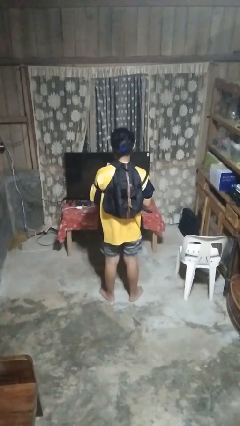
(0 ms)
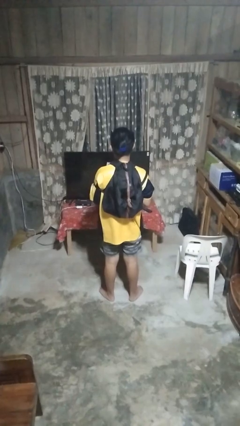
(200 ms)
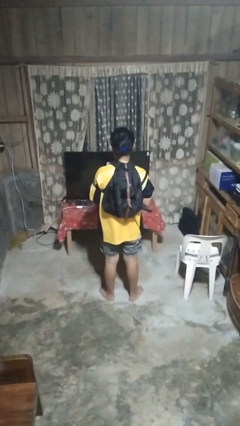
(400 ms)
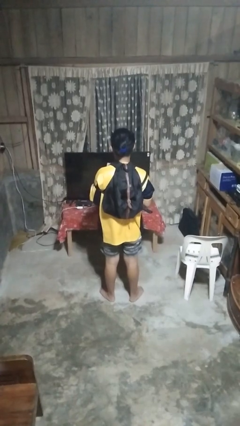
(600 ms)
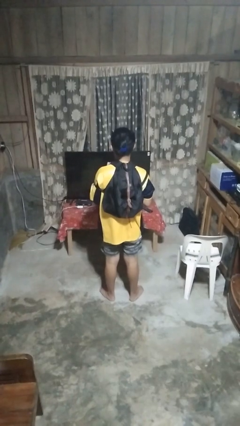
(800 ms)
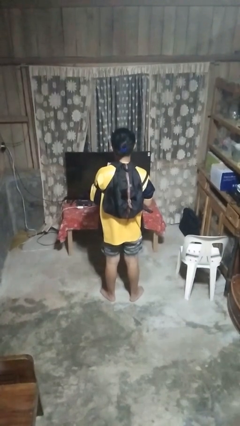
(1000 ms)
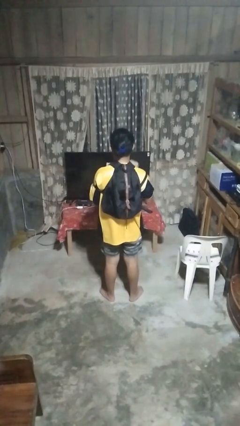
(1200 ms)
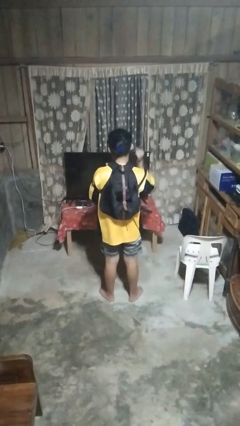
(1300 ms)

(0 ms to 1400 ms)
person takes off backpack

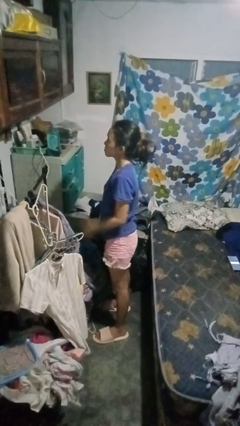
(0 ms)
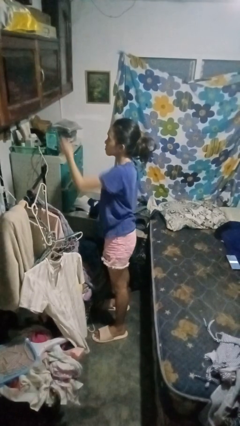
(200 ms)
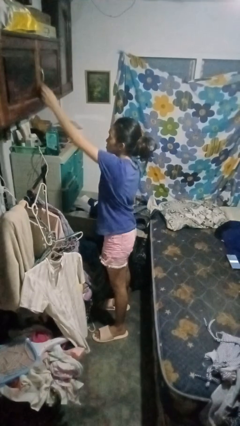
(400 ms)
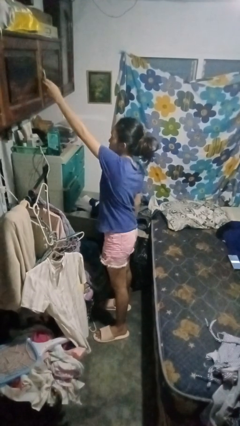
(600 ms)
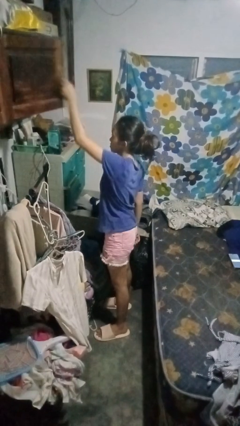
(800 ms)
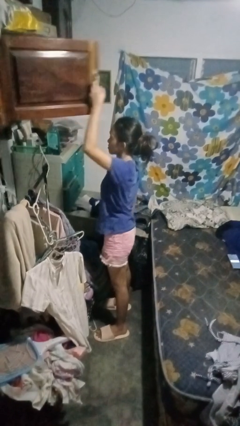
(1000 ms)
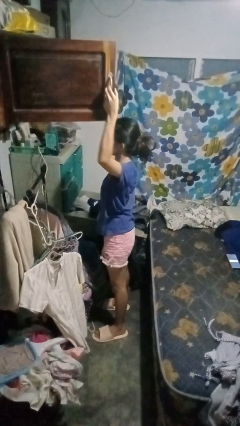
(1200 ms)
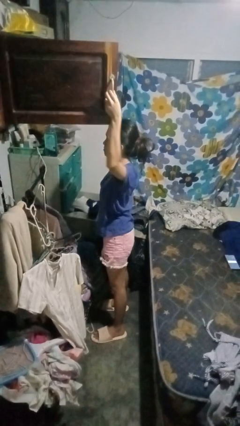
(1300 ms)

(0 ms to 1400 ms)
person opens closet door

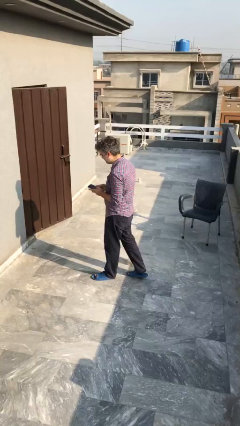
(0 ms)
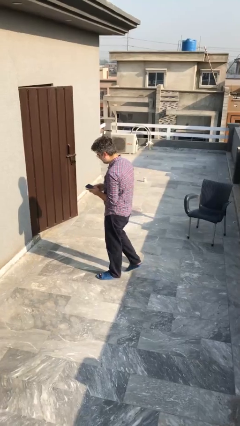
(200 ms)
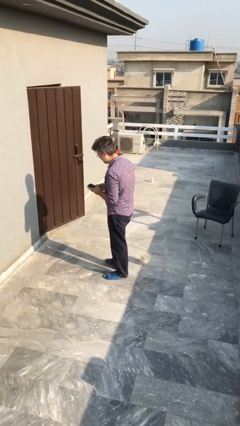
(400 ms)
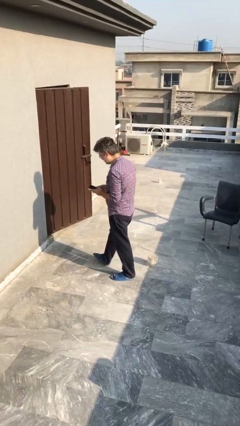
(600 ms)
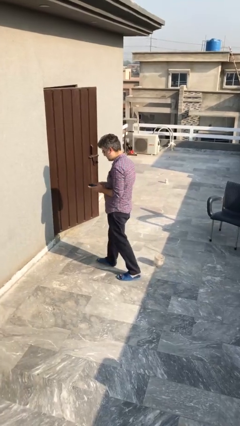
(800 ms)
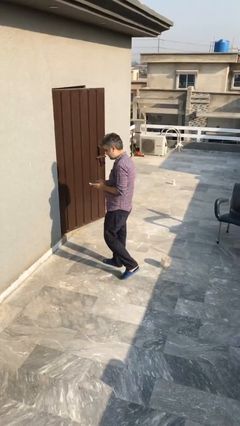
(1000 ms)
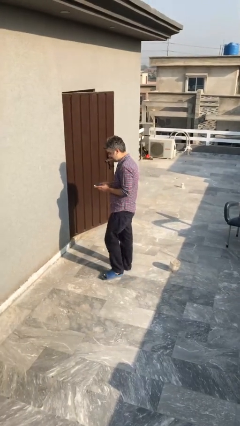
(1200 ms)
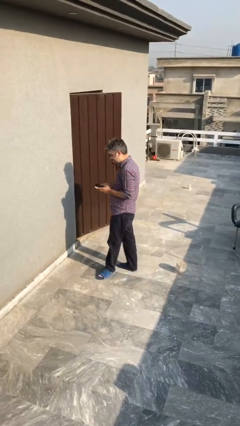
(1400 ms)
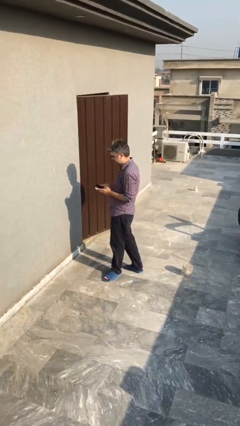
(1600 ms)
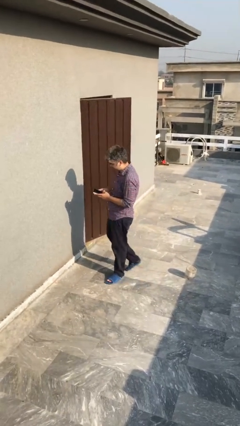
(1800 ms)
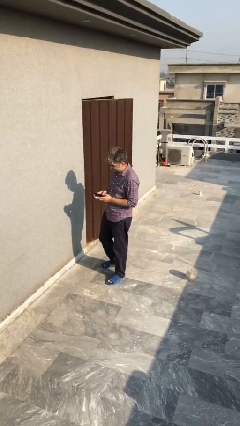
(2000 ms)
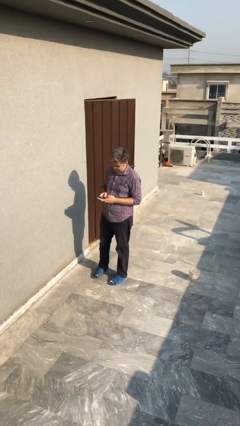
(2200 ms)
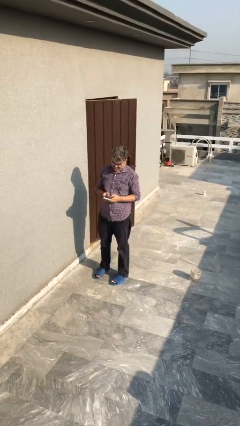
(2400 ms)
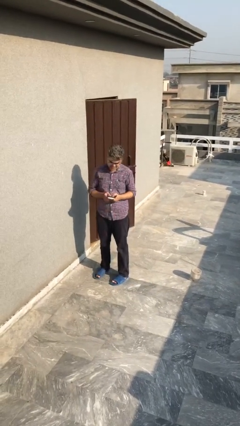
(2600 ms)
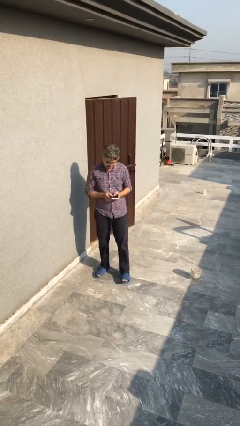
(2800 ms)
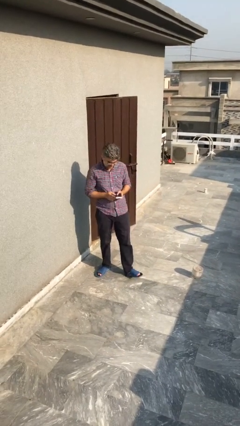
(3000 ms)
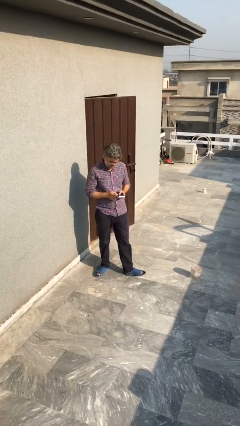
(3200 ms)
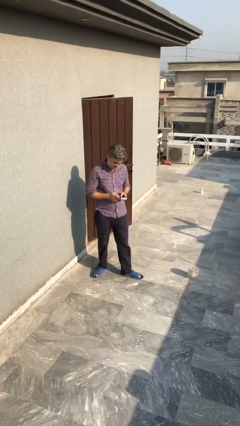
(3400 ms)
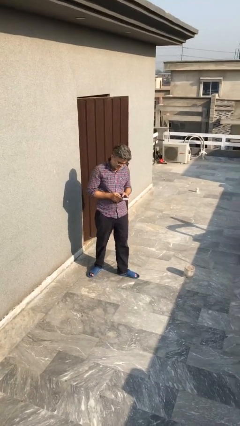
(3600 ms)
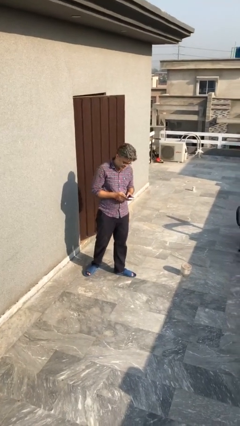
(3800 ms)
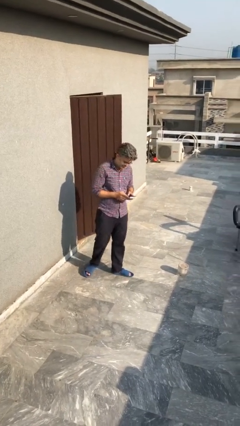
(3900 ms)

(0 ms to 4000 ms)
person texts on phone

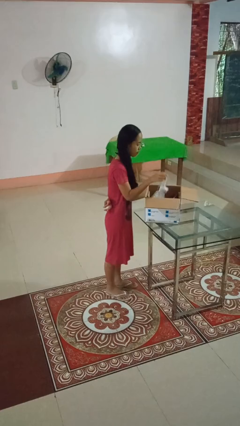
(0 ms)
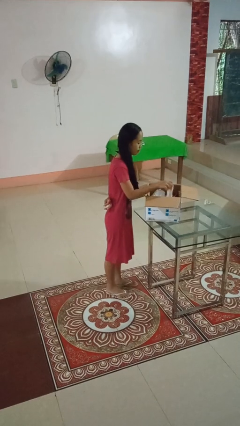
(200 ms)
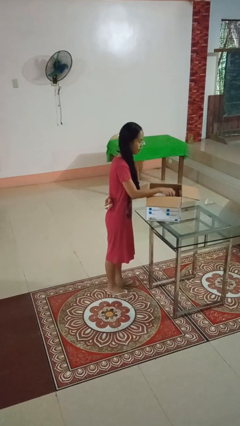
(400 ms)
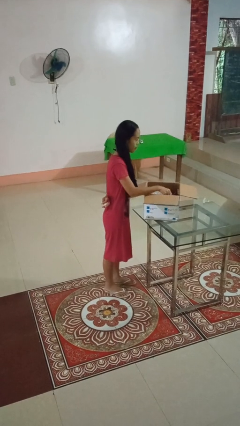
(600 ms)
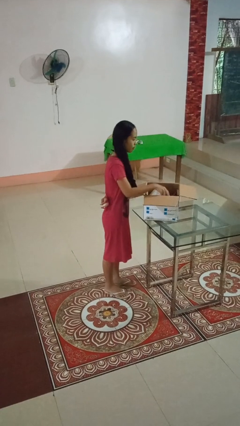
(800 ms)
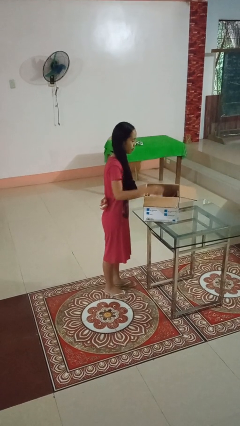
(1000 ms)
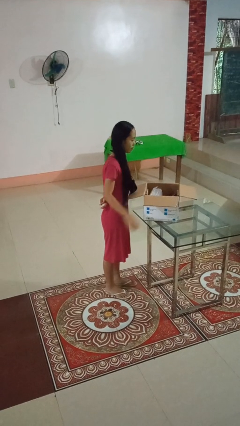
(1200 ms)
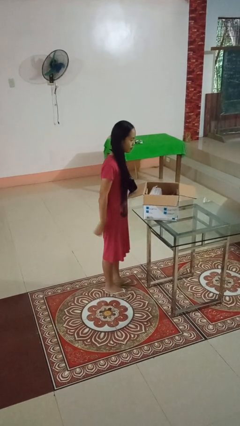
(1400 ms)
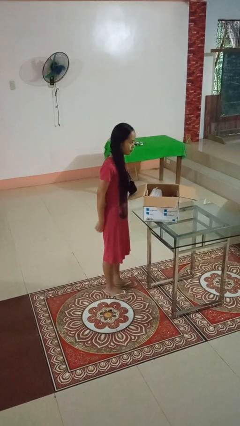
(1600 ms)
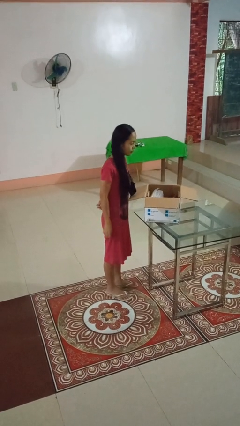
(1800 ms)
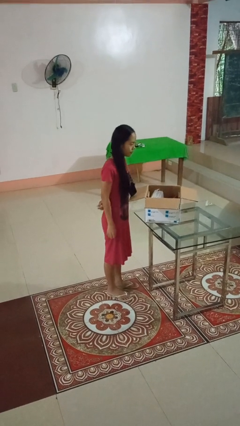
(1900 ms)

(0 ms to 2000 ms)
person puts object into box

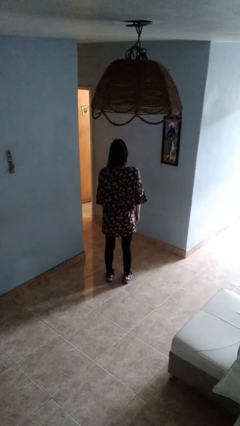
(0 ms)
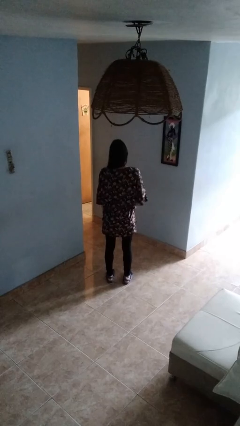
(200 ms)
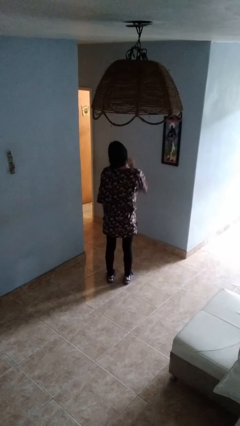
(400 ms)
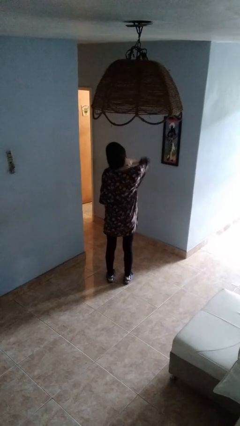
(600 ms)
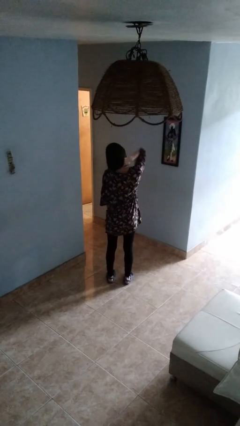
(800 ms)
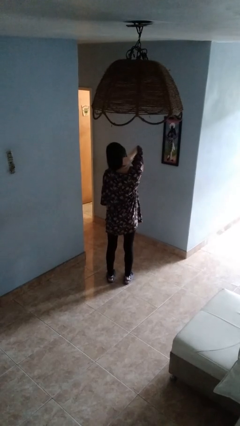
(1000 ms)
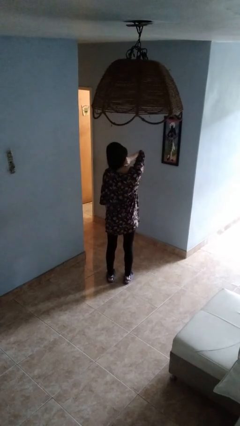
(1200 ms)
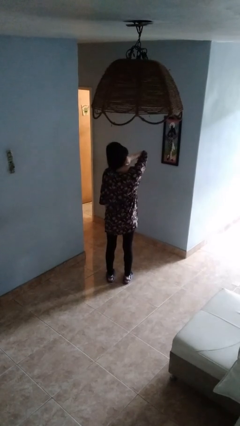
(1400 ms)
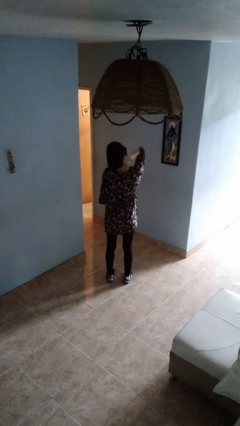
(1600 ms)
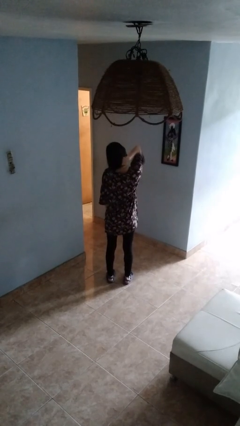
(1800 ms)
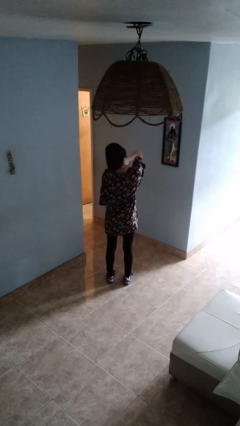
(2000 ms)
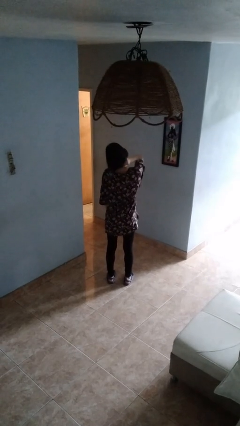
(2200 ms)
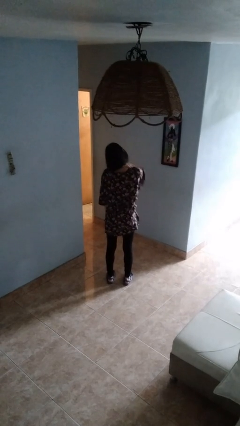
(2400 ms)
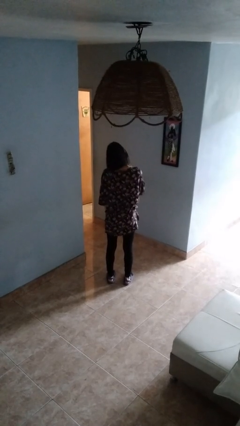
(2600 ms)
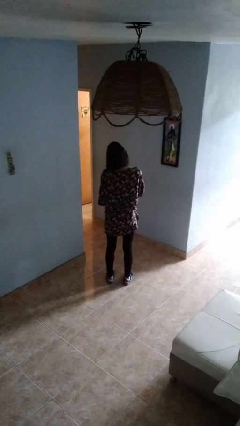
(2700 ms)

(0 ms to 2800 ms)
person rubs neck

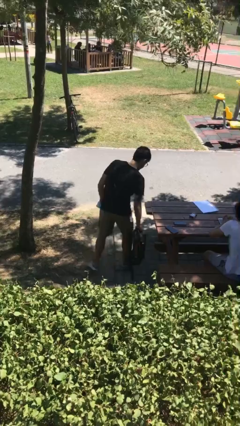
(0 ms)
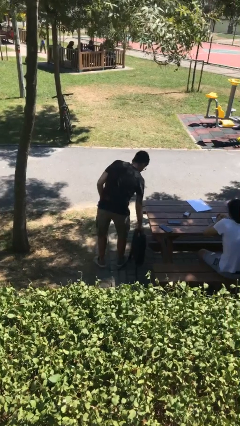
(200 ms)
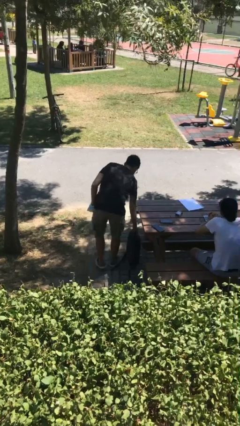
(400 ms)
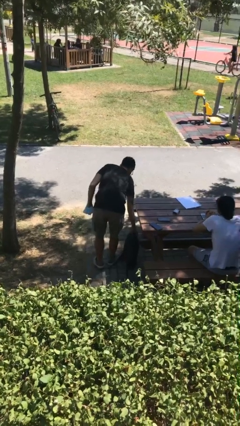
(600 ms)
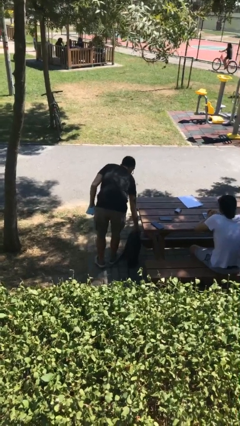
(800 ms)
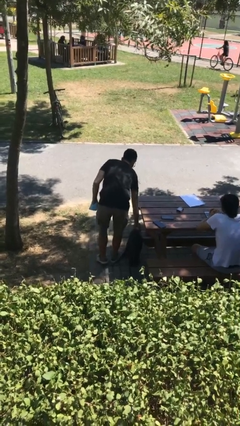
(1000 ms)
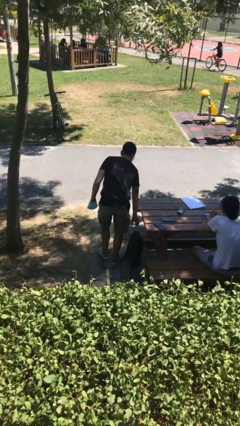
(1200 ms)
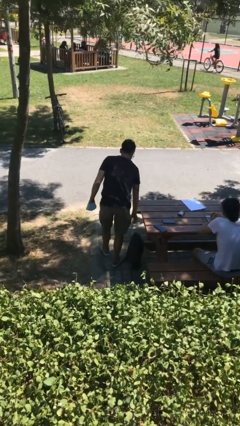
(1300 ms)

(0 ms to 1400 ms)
person puts down object on floor

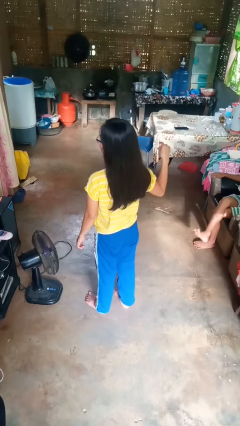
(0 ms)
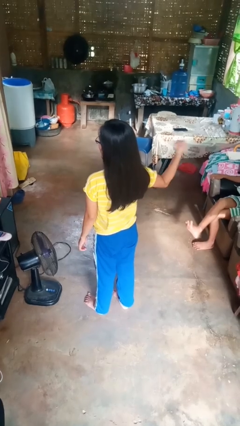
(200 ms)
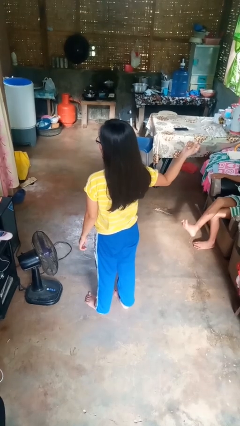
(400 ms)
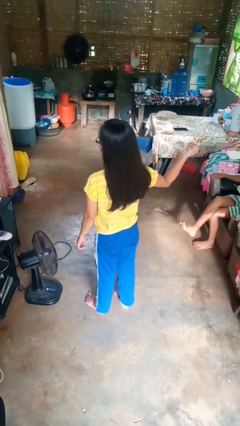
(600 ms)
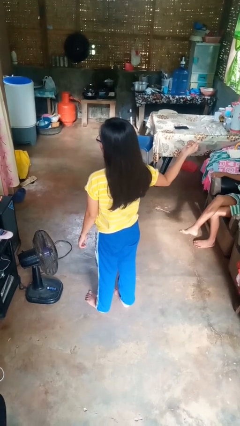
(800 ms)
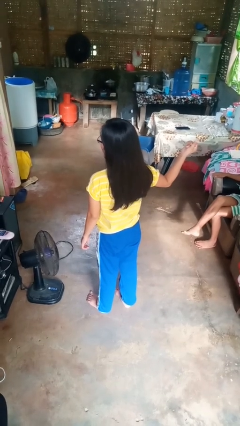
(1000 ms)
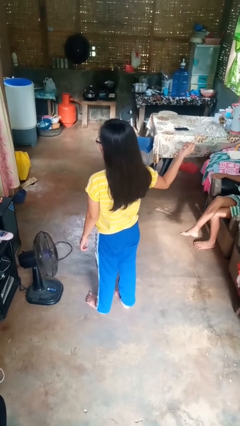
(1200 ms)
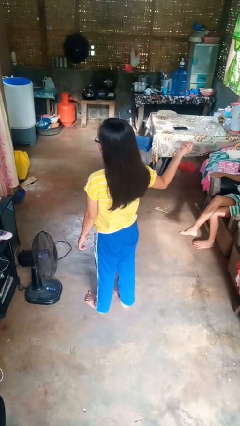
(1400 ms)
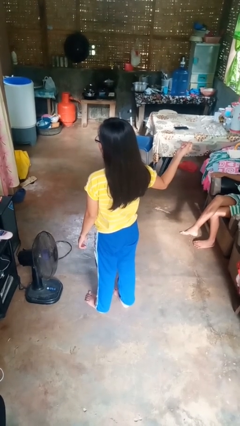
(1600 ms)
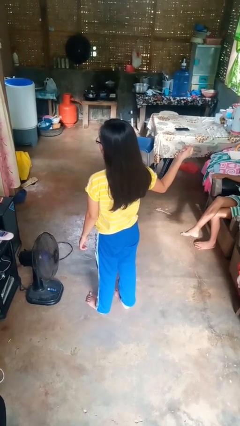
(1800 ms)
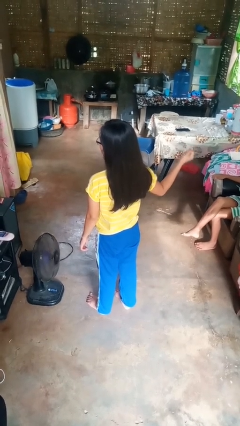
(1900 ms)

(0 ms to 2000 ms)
person snaps fingers

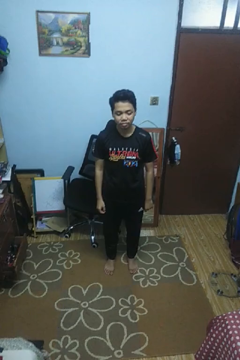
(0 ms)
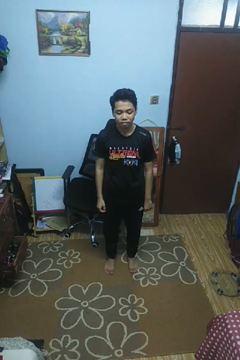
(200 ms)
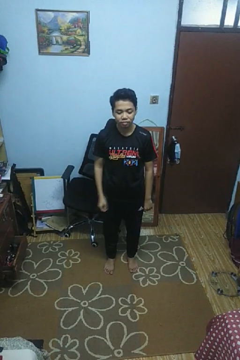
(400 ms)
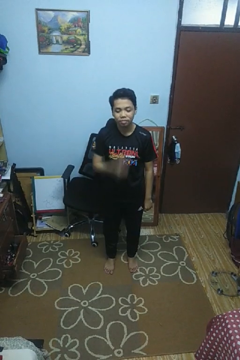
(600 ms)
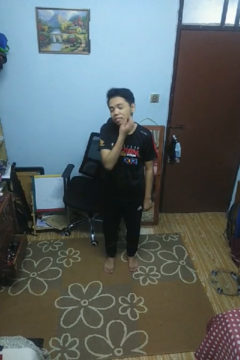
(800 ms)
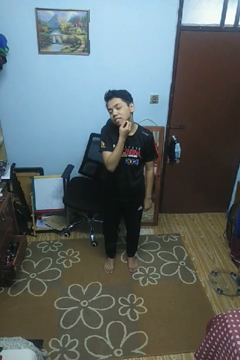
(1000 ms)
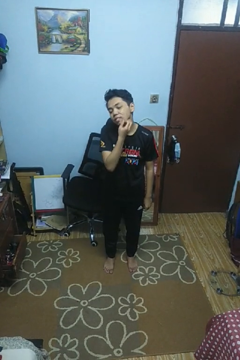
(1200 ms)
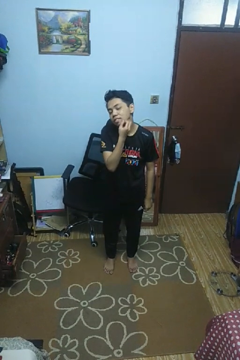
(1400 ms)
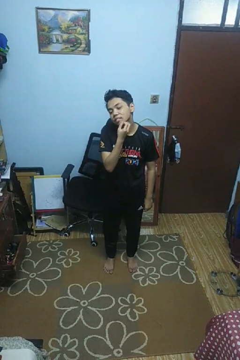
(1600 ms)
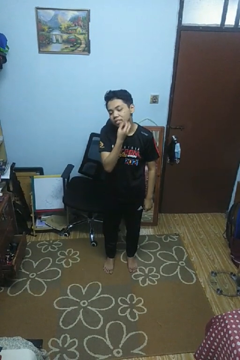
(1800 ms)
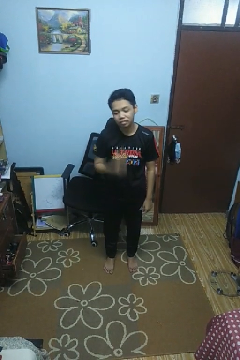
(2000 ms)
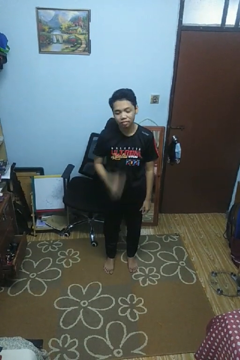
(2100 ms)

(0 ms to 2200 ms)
person scratches face
